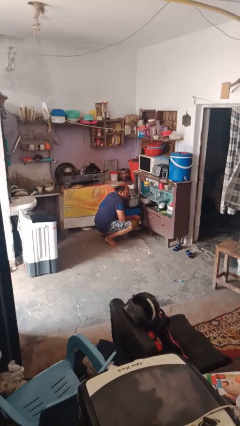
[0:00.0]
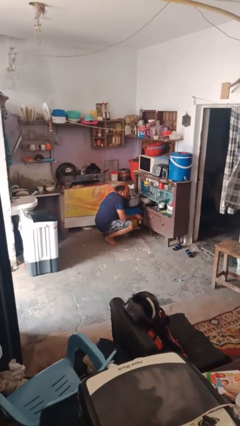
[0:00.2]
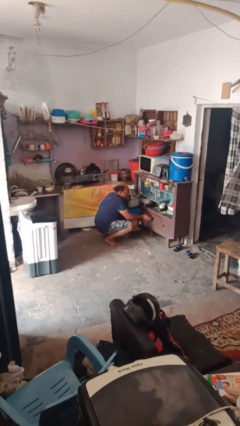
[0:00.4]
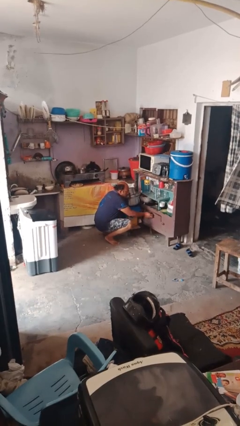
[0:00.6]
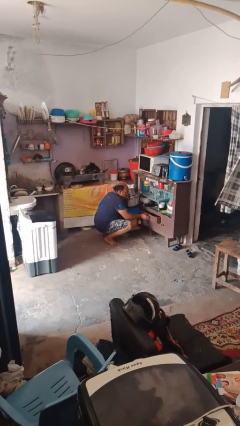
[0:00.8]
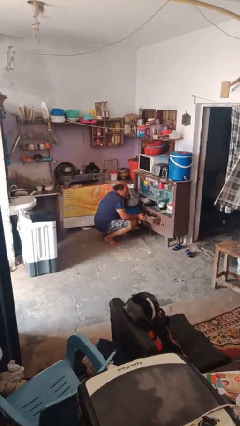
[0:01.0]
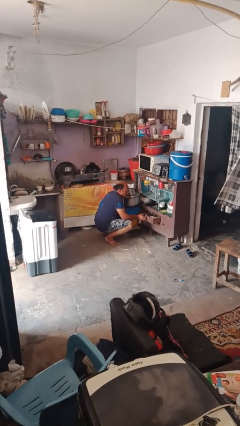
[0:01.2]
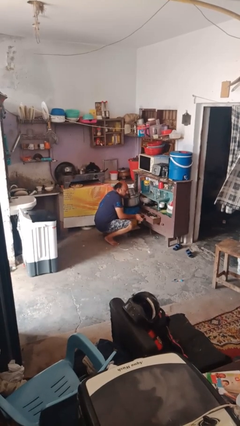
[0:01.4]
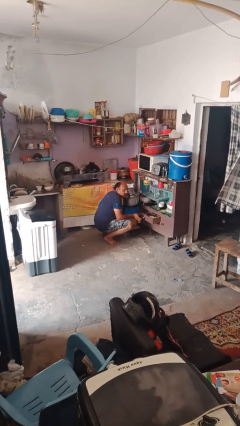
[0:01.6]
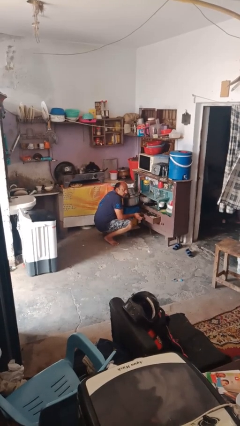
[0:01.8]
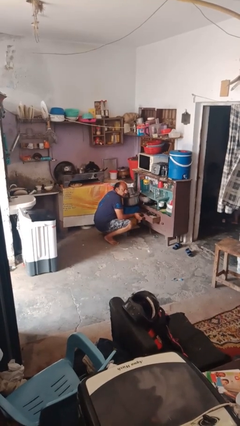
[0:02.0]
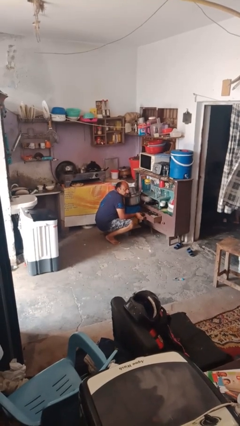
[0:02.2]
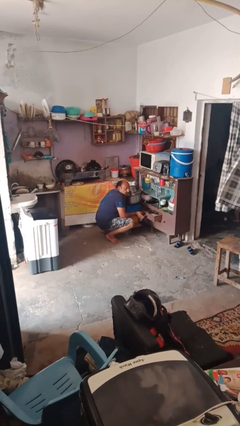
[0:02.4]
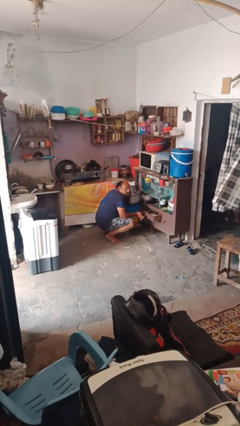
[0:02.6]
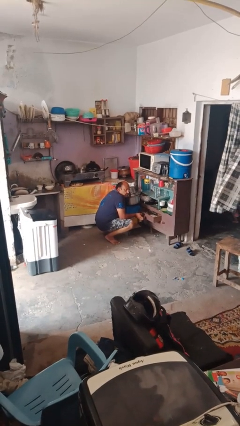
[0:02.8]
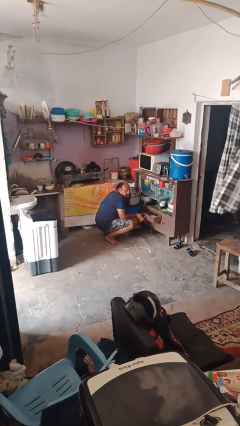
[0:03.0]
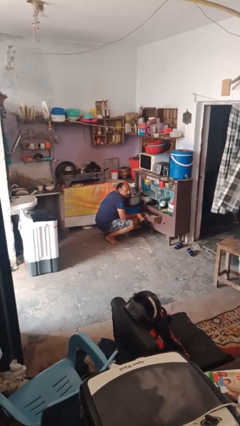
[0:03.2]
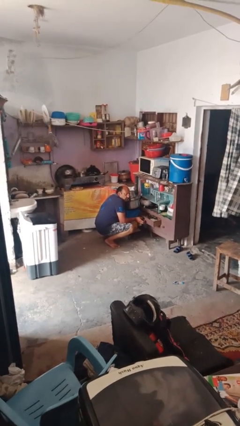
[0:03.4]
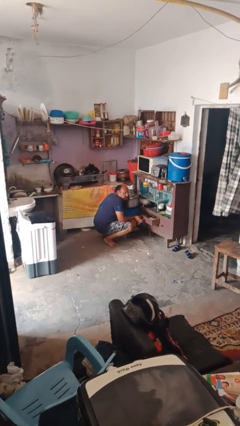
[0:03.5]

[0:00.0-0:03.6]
person opens kitchen drawer

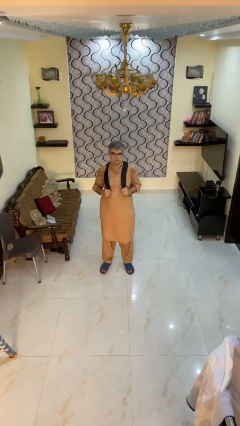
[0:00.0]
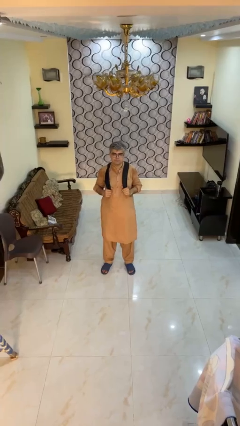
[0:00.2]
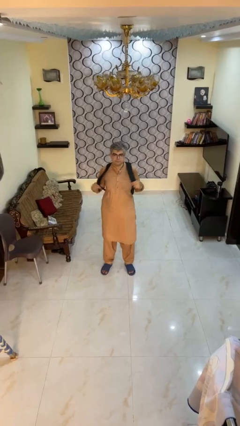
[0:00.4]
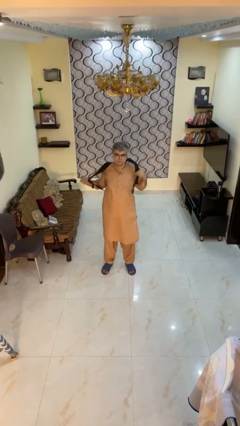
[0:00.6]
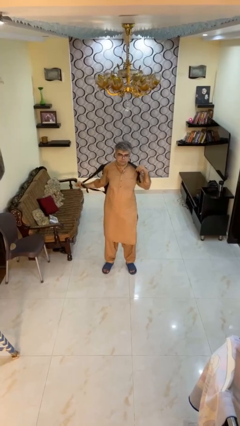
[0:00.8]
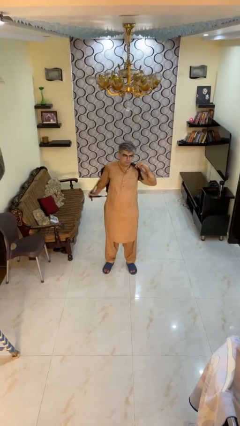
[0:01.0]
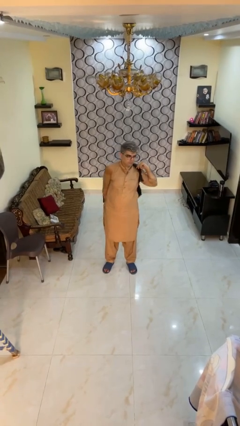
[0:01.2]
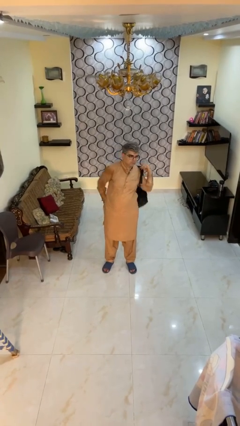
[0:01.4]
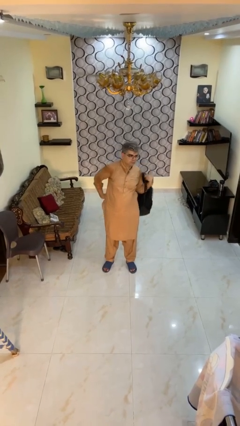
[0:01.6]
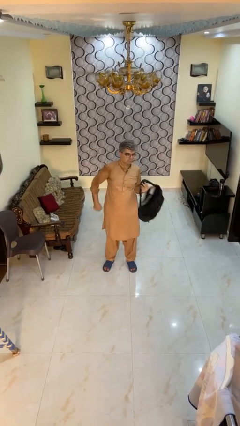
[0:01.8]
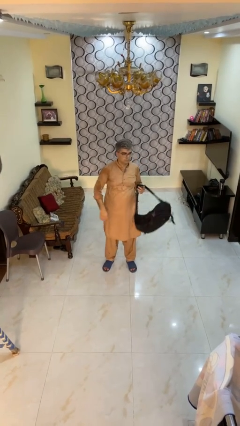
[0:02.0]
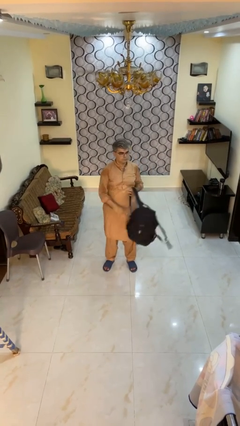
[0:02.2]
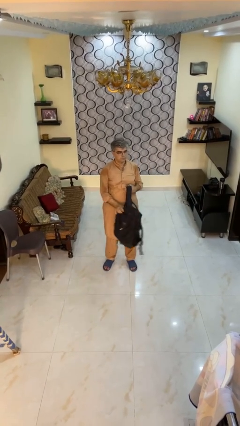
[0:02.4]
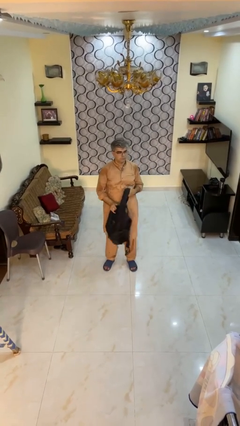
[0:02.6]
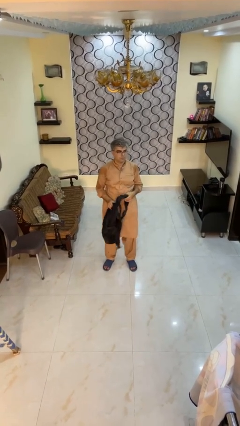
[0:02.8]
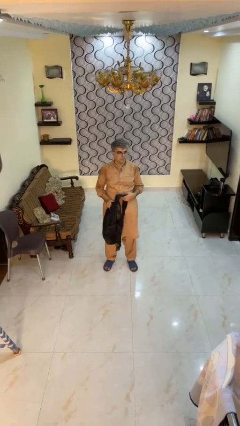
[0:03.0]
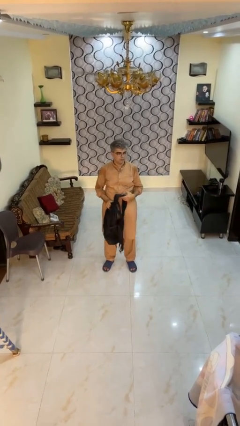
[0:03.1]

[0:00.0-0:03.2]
person takes off backpack

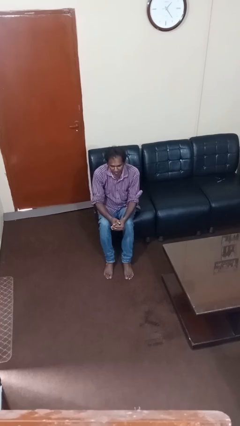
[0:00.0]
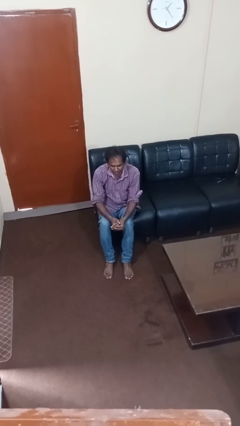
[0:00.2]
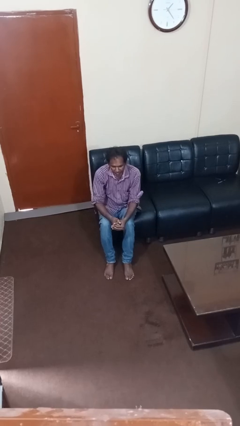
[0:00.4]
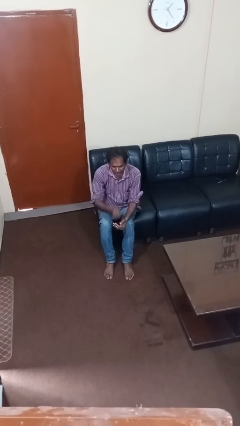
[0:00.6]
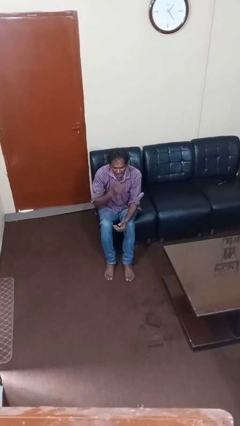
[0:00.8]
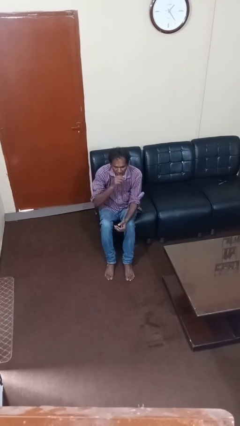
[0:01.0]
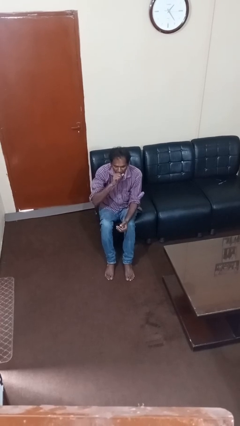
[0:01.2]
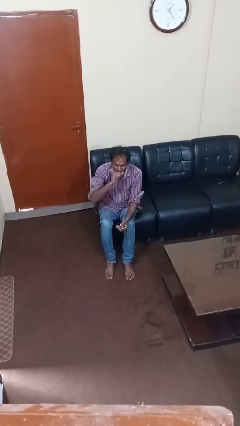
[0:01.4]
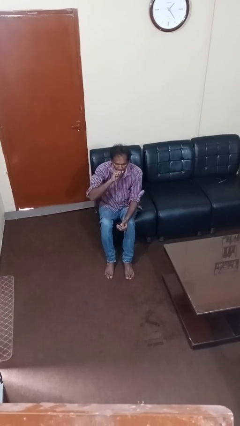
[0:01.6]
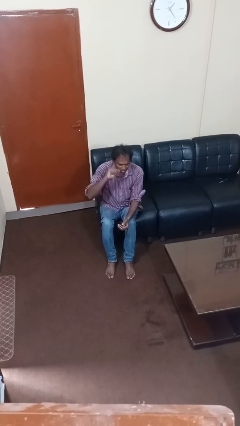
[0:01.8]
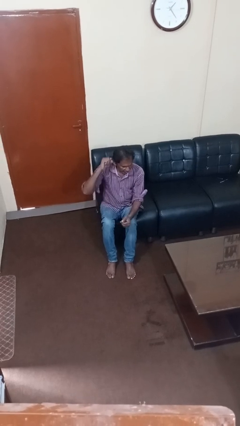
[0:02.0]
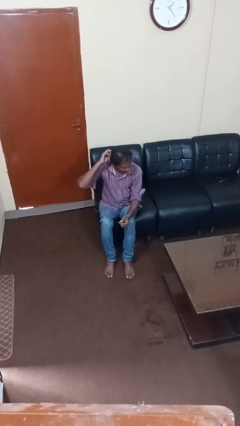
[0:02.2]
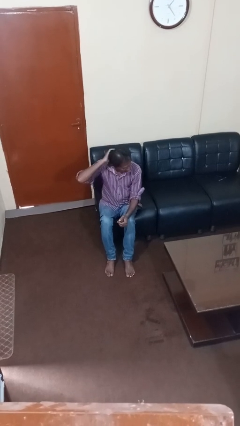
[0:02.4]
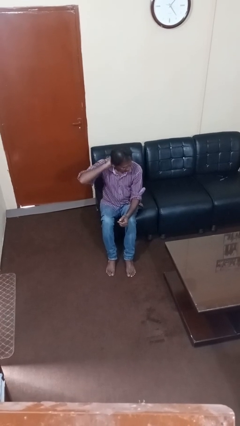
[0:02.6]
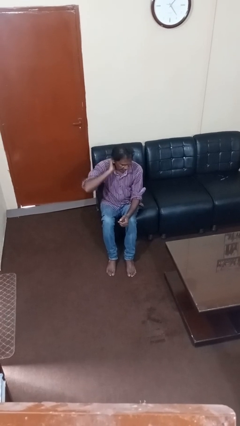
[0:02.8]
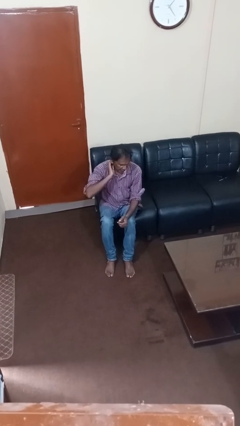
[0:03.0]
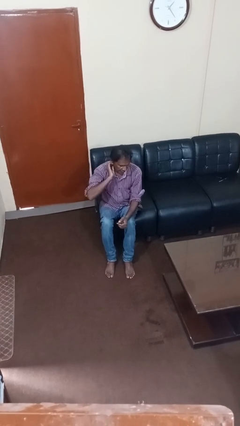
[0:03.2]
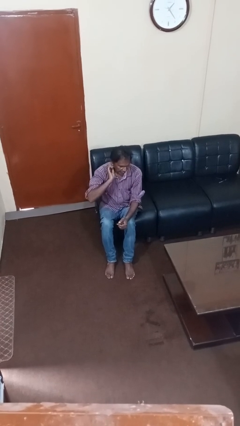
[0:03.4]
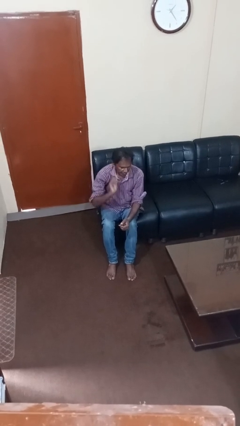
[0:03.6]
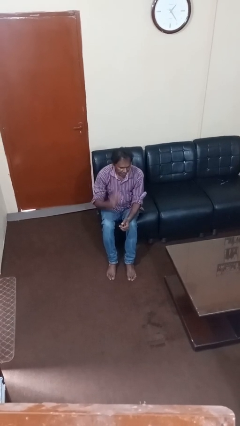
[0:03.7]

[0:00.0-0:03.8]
person yawns

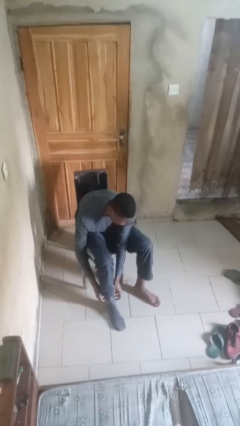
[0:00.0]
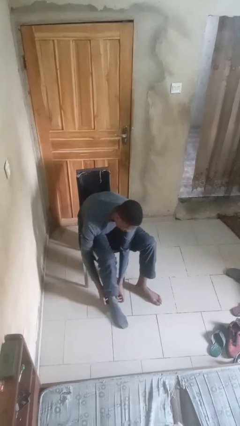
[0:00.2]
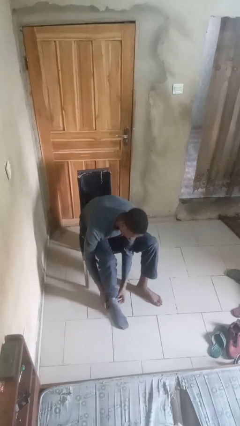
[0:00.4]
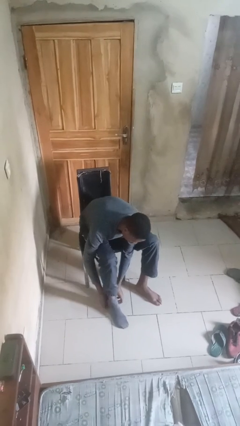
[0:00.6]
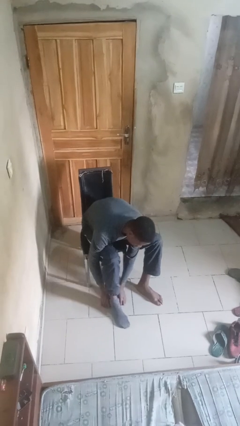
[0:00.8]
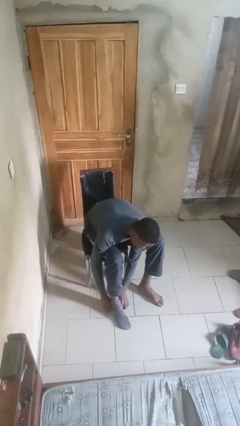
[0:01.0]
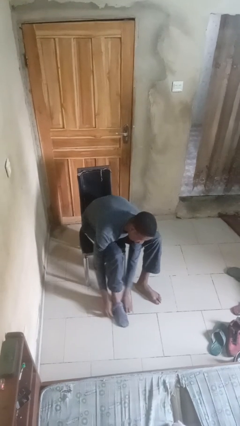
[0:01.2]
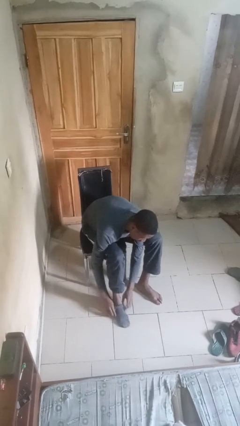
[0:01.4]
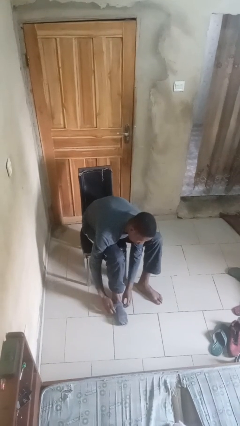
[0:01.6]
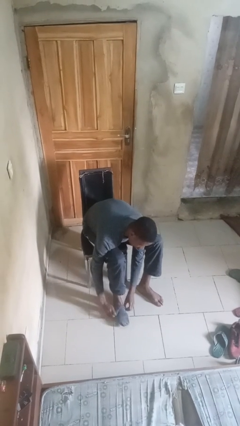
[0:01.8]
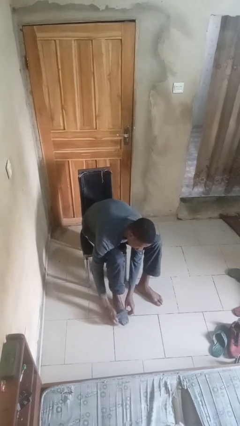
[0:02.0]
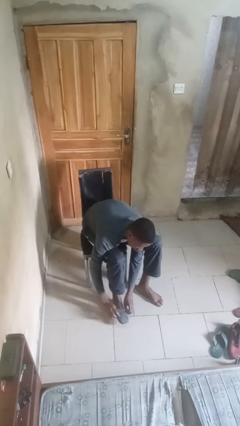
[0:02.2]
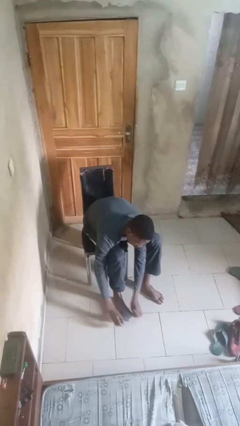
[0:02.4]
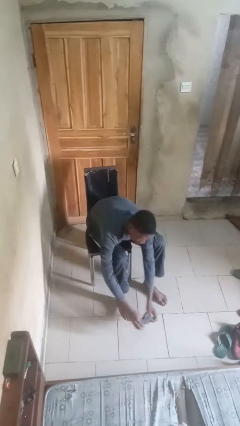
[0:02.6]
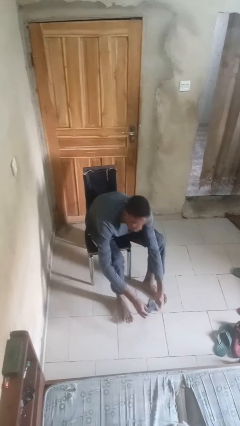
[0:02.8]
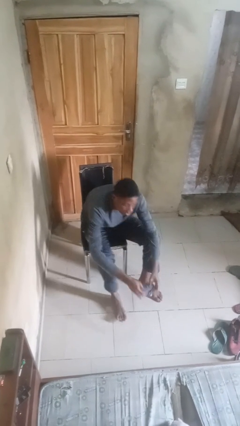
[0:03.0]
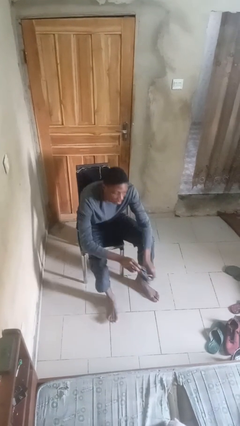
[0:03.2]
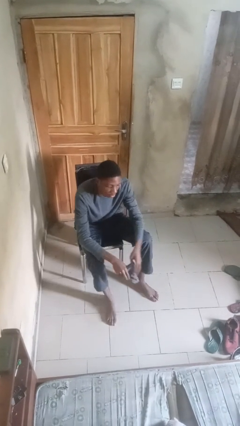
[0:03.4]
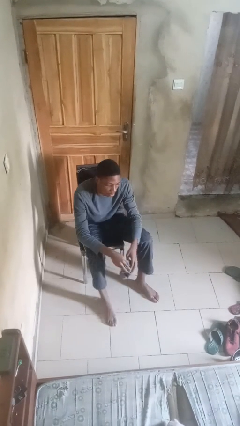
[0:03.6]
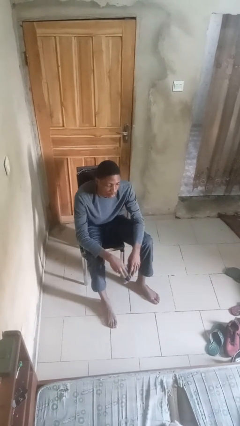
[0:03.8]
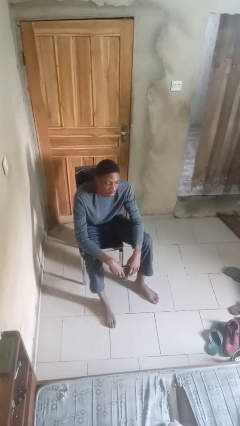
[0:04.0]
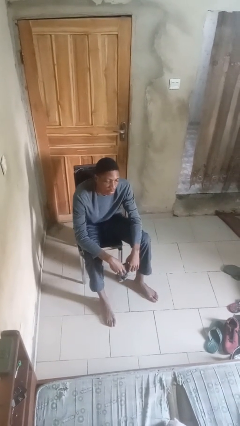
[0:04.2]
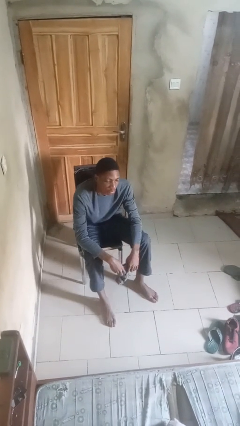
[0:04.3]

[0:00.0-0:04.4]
person takes off socks

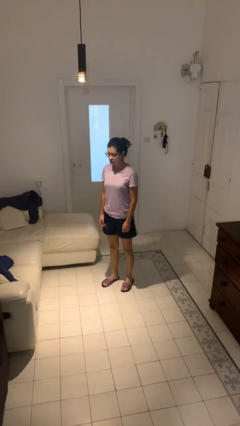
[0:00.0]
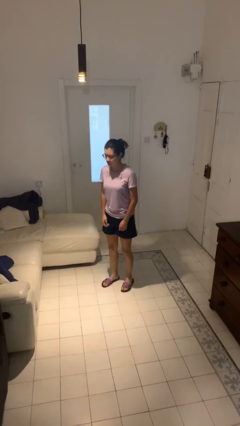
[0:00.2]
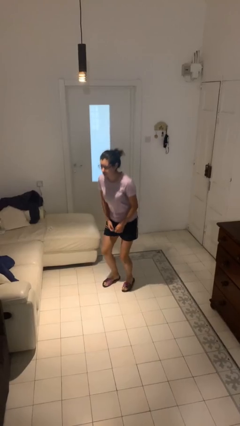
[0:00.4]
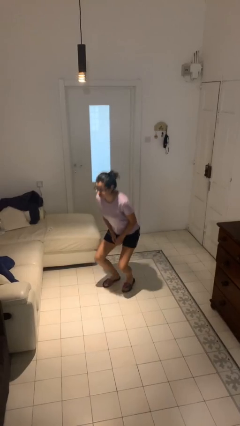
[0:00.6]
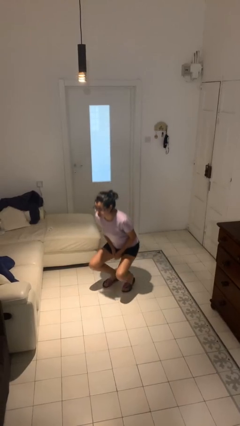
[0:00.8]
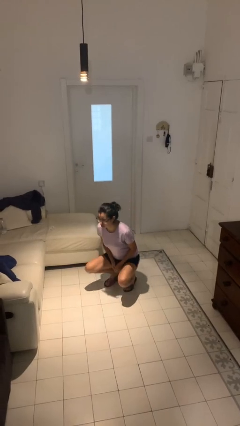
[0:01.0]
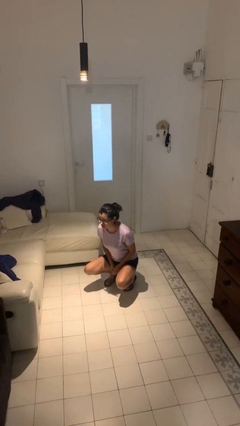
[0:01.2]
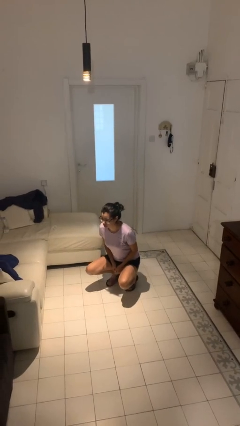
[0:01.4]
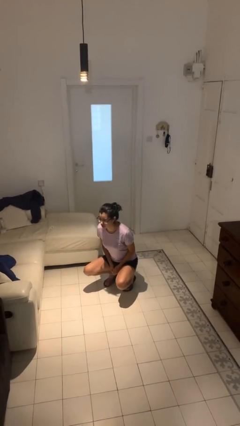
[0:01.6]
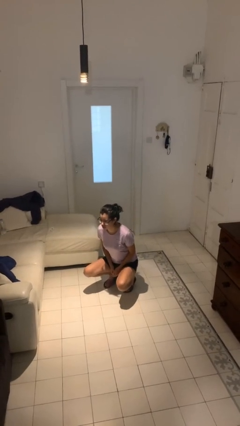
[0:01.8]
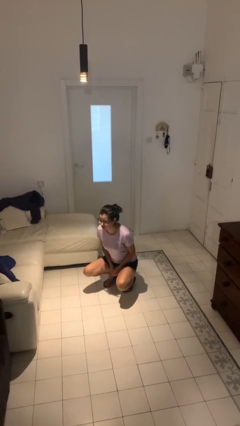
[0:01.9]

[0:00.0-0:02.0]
person squats

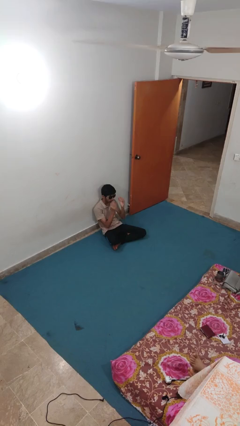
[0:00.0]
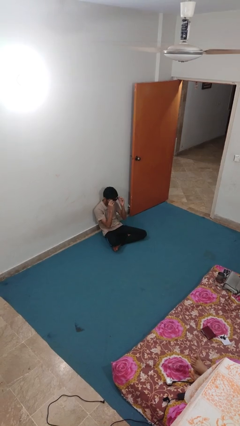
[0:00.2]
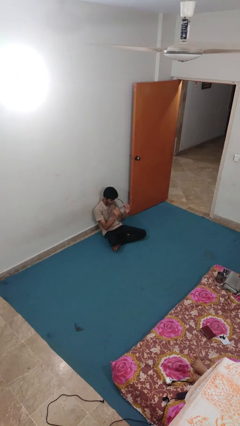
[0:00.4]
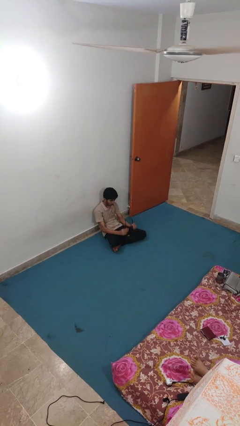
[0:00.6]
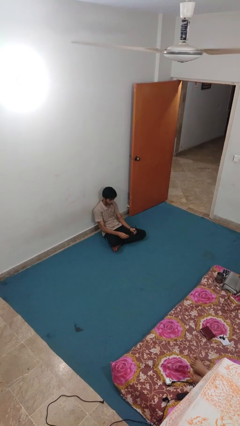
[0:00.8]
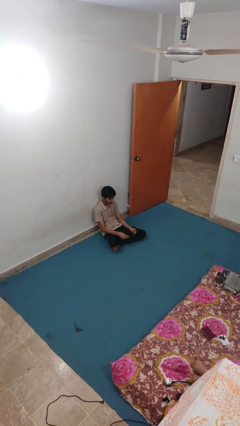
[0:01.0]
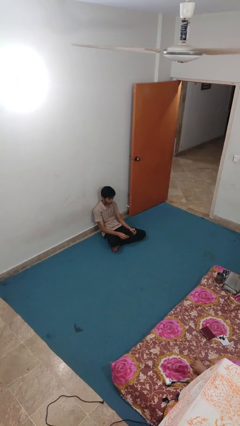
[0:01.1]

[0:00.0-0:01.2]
person takes off sunglasses
